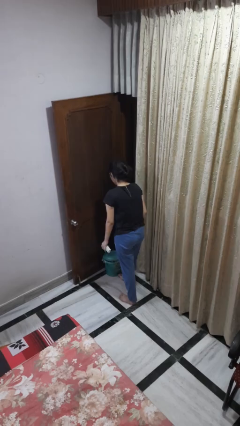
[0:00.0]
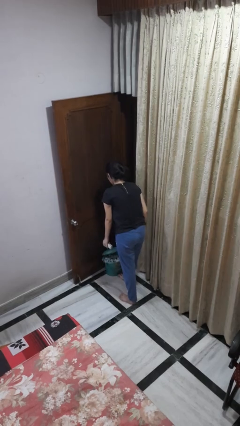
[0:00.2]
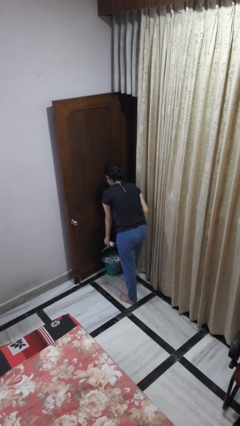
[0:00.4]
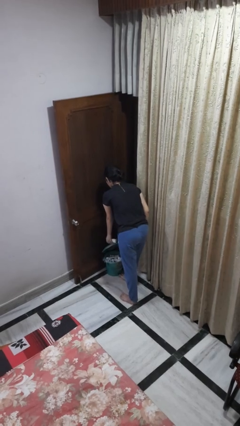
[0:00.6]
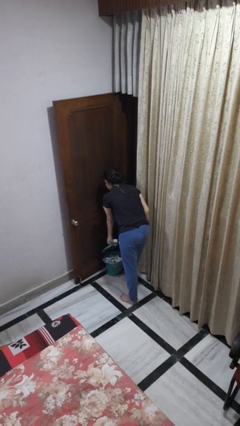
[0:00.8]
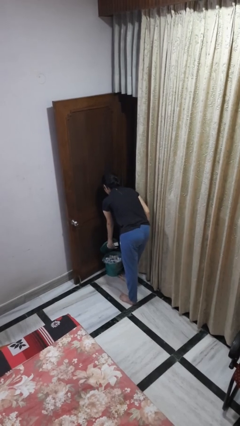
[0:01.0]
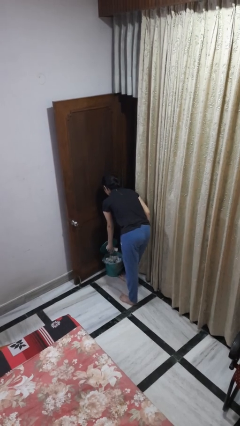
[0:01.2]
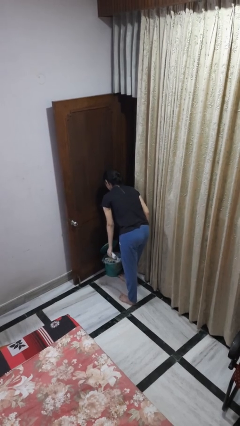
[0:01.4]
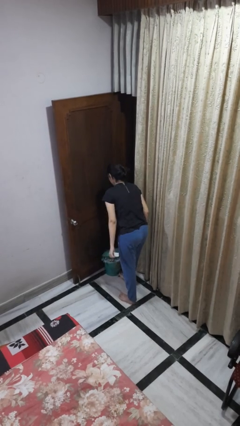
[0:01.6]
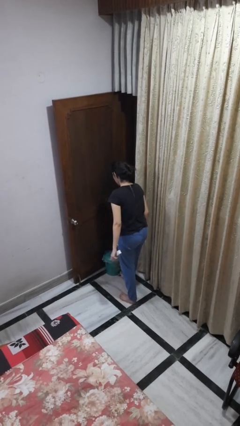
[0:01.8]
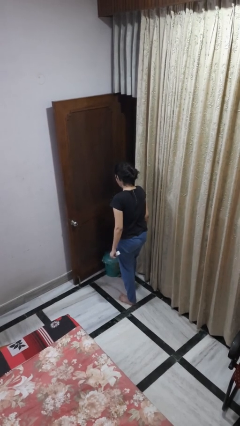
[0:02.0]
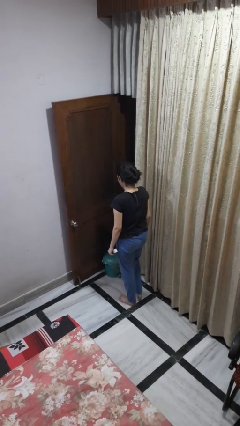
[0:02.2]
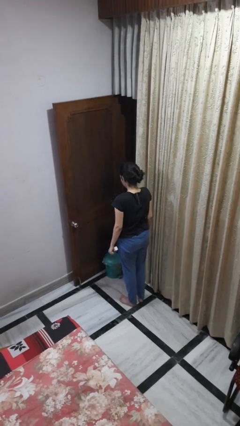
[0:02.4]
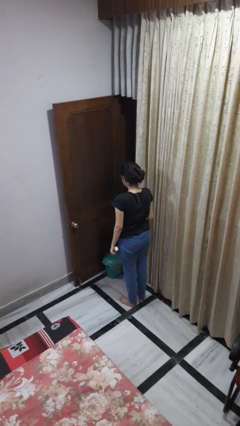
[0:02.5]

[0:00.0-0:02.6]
person discards trash

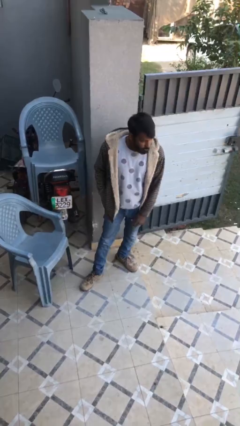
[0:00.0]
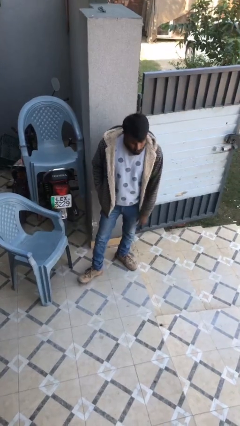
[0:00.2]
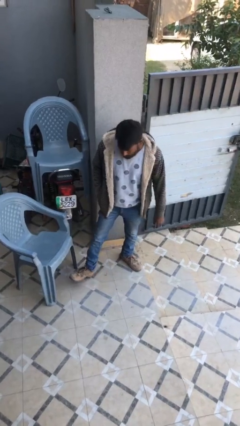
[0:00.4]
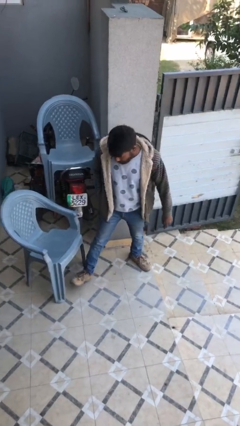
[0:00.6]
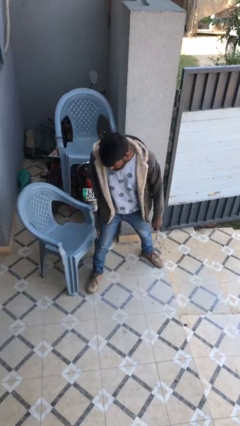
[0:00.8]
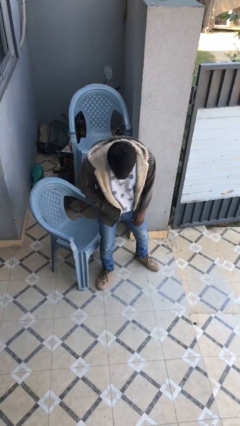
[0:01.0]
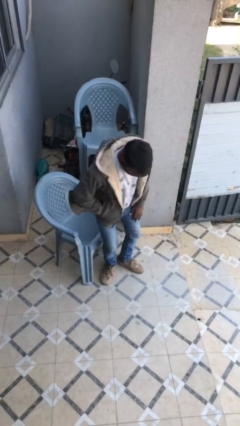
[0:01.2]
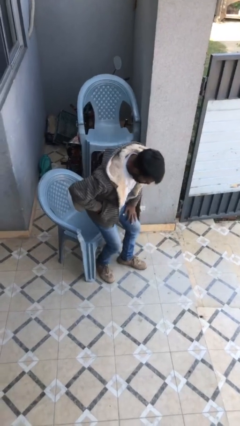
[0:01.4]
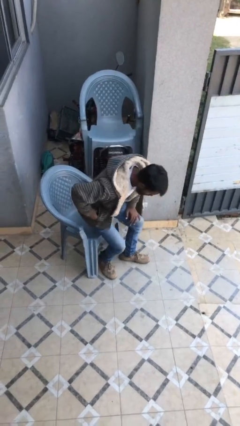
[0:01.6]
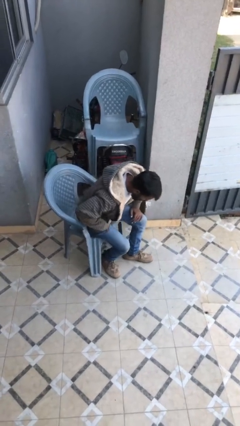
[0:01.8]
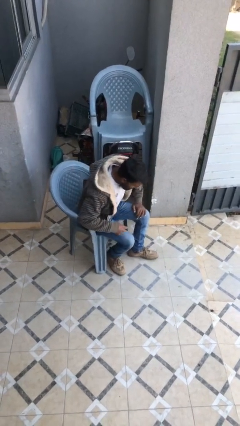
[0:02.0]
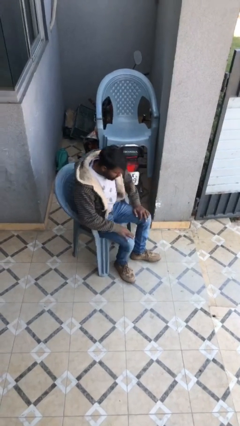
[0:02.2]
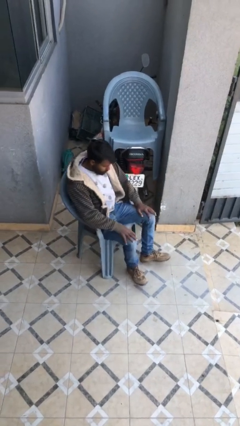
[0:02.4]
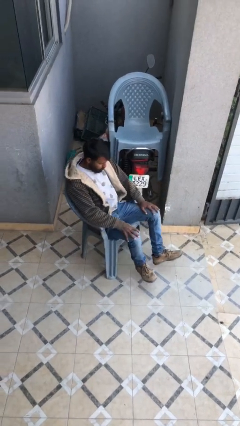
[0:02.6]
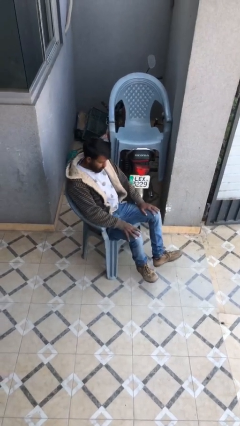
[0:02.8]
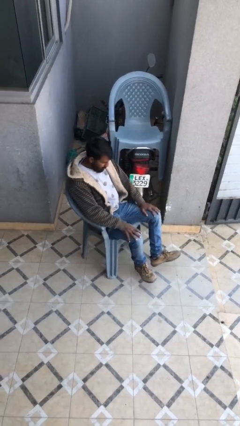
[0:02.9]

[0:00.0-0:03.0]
person sits down

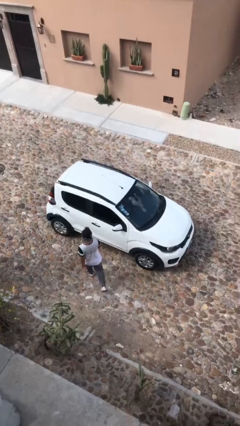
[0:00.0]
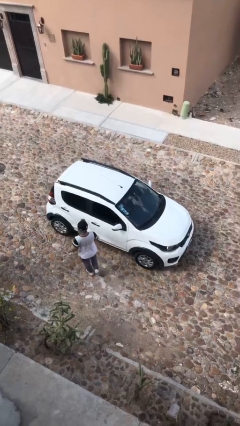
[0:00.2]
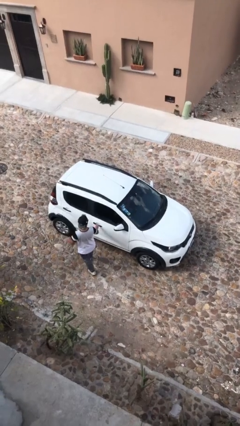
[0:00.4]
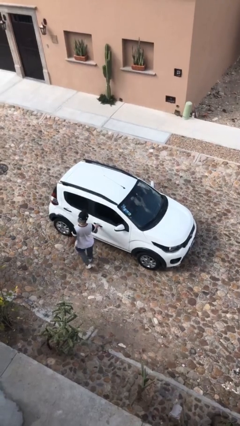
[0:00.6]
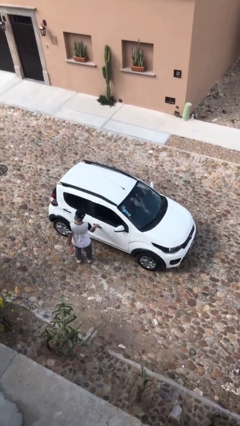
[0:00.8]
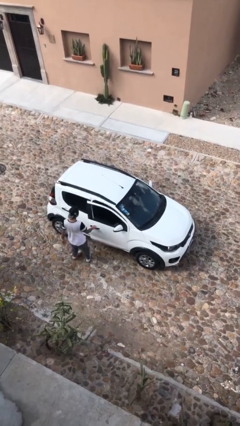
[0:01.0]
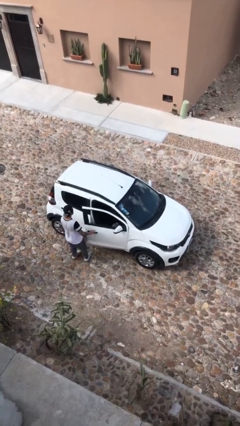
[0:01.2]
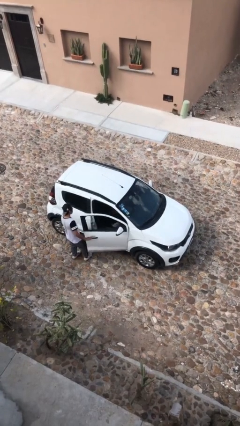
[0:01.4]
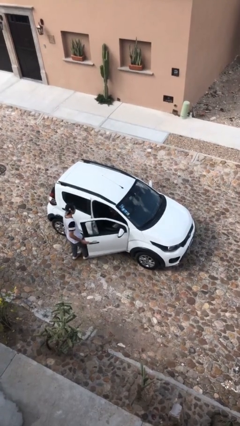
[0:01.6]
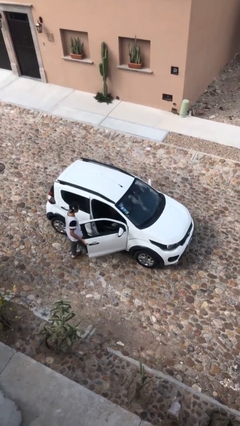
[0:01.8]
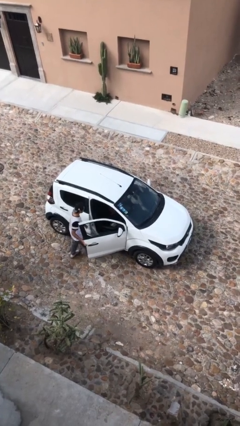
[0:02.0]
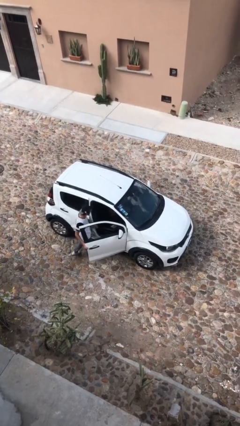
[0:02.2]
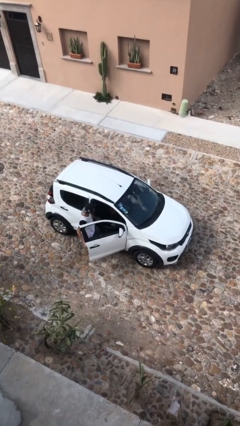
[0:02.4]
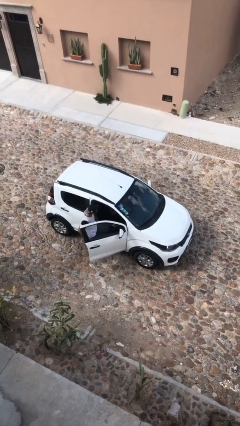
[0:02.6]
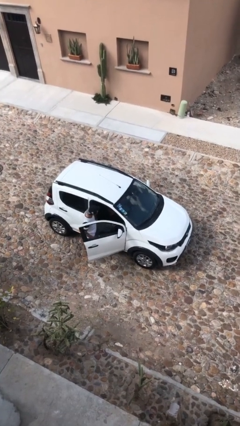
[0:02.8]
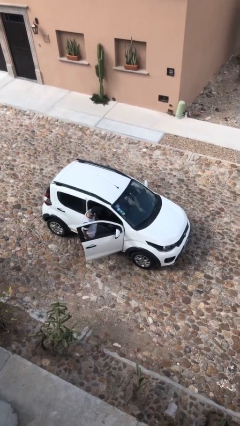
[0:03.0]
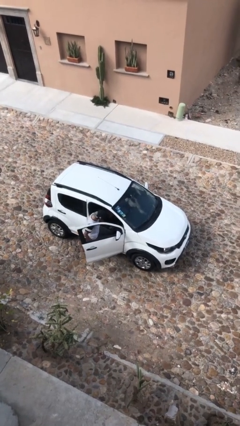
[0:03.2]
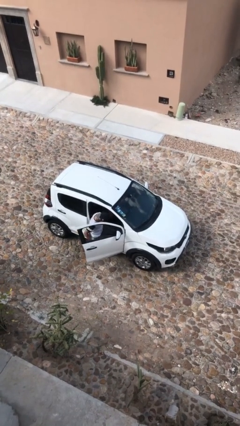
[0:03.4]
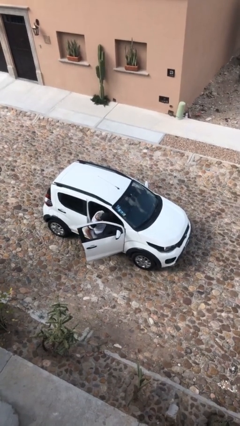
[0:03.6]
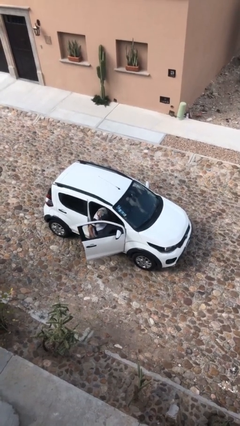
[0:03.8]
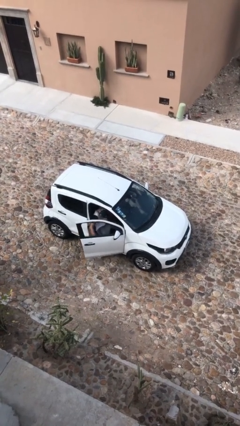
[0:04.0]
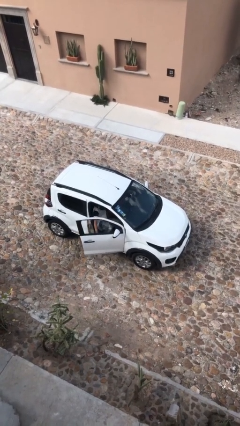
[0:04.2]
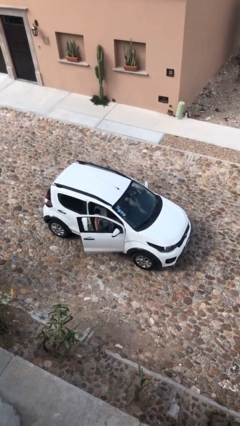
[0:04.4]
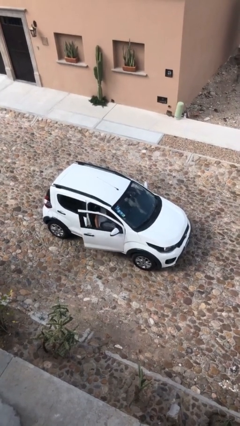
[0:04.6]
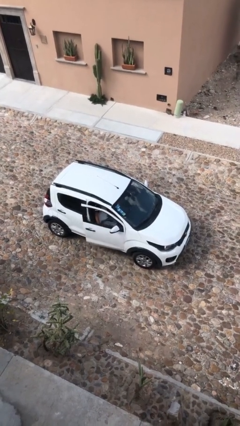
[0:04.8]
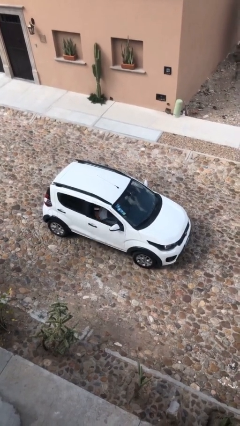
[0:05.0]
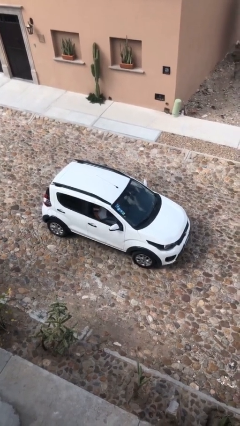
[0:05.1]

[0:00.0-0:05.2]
car picks up person

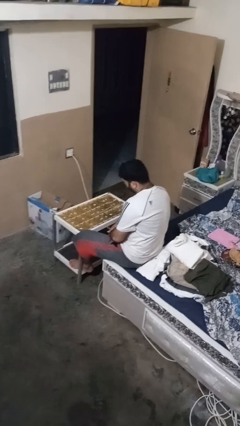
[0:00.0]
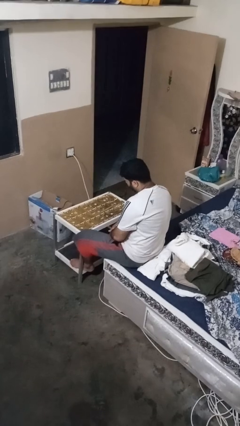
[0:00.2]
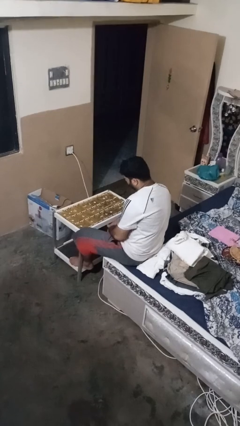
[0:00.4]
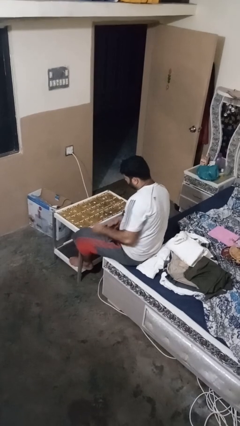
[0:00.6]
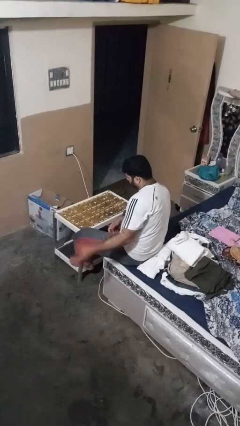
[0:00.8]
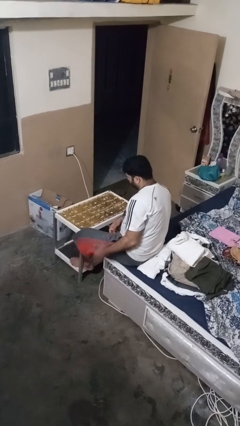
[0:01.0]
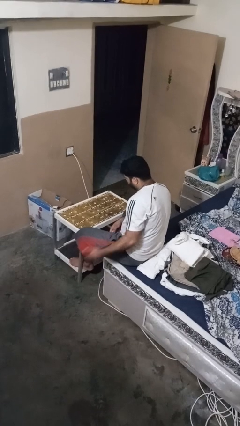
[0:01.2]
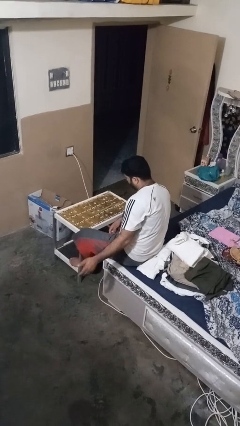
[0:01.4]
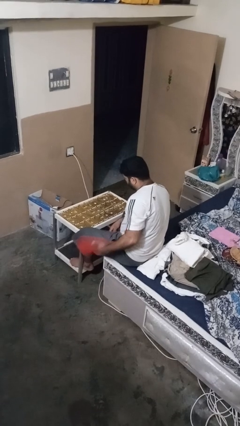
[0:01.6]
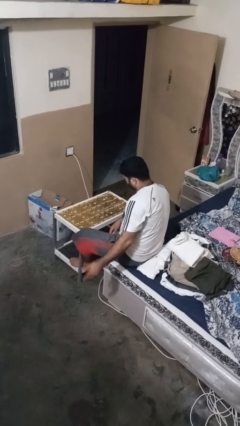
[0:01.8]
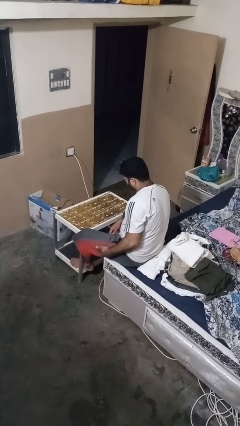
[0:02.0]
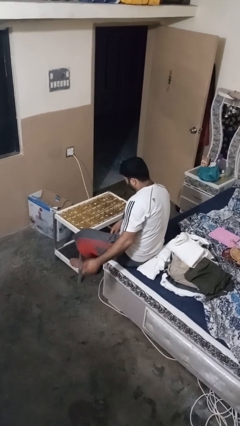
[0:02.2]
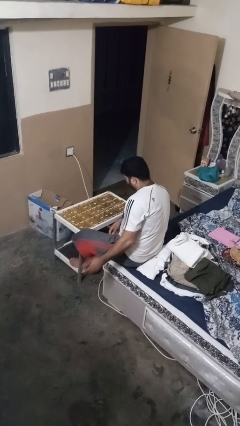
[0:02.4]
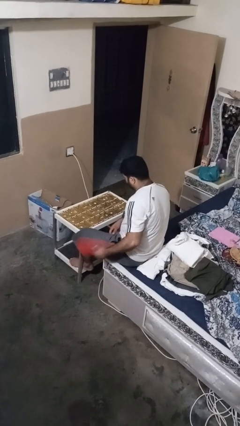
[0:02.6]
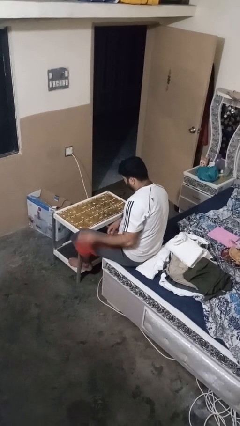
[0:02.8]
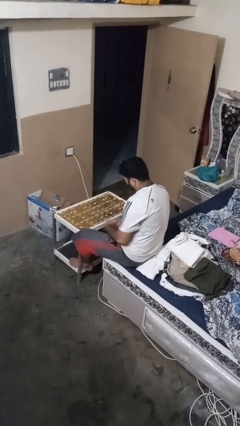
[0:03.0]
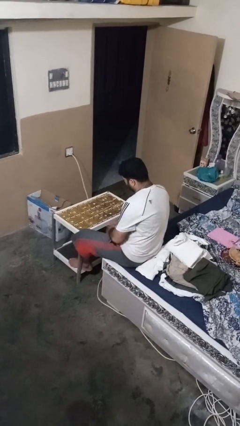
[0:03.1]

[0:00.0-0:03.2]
person slaps hands on thighs

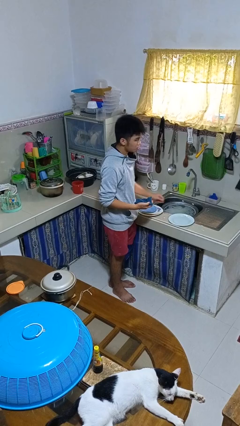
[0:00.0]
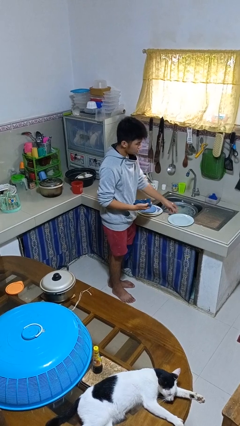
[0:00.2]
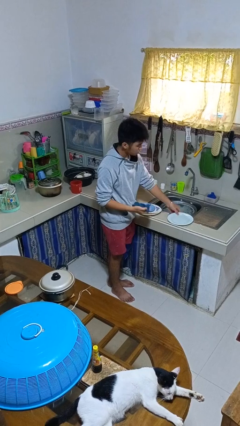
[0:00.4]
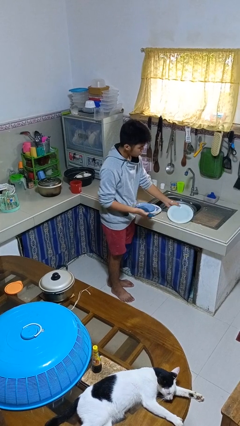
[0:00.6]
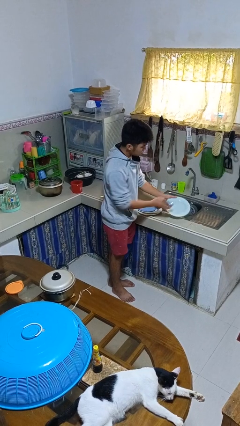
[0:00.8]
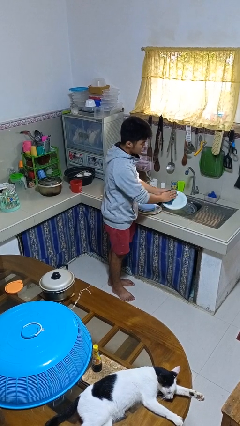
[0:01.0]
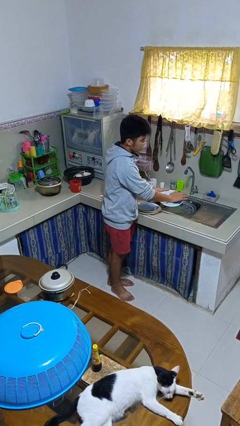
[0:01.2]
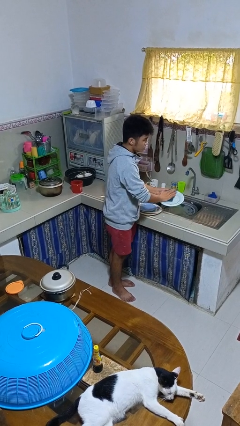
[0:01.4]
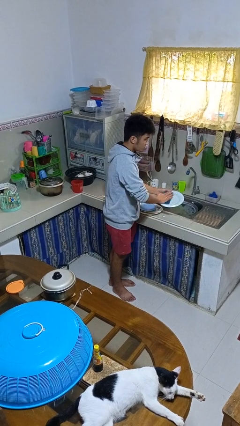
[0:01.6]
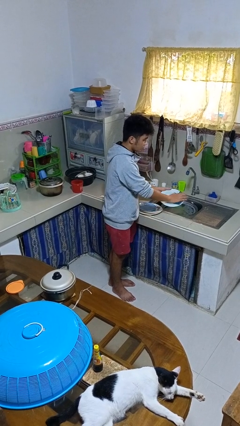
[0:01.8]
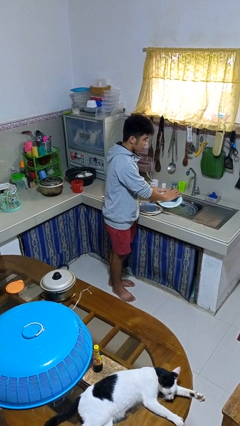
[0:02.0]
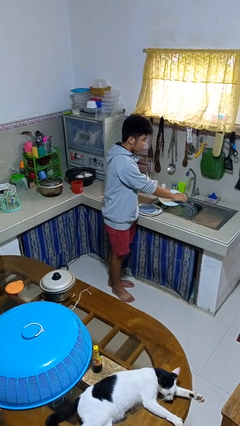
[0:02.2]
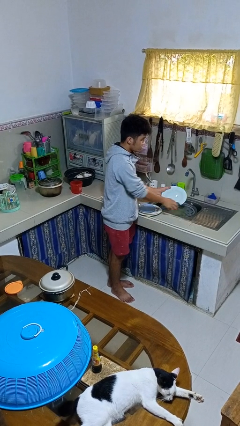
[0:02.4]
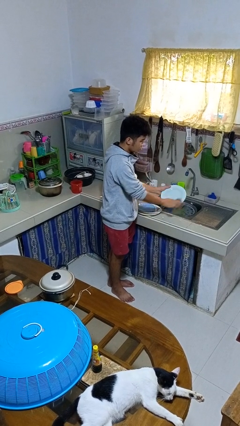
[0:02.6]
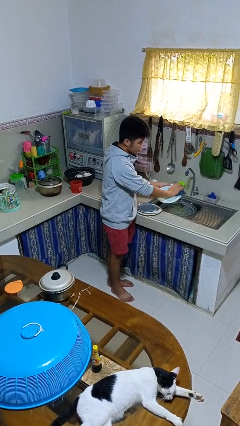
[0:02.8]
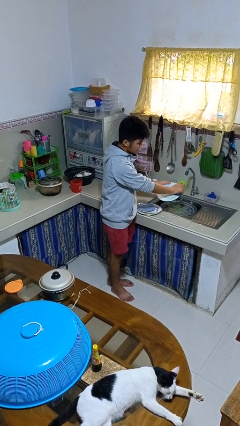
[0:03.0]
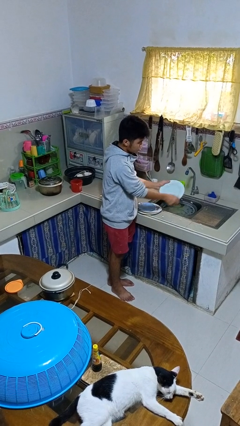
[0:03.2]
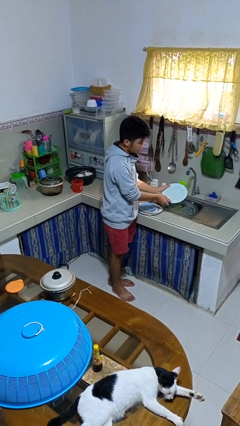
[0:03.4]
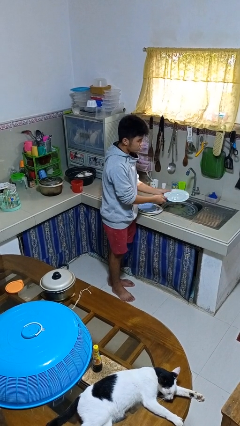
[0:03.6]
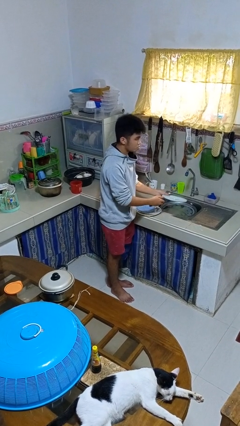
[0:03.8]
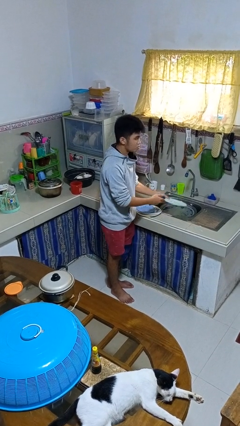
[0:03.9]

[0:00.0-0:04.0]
person dries dish

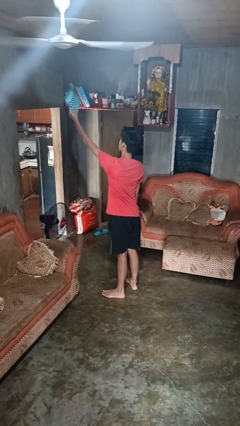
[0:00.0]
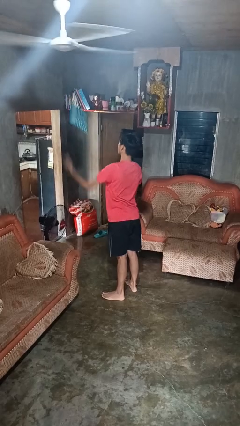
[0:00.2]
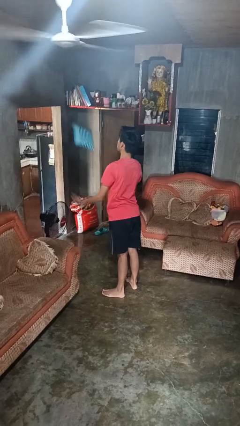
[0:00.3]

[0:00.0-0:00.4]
person drops object
